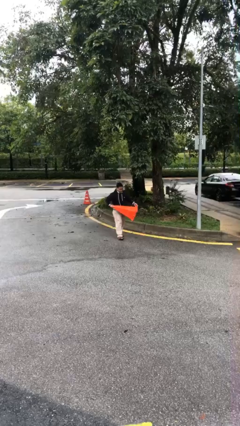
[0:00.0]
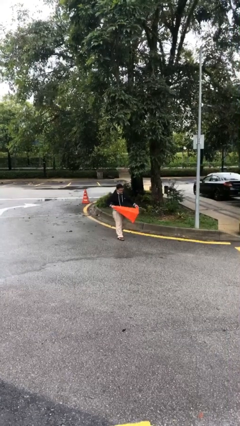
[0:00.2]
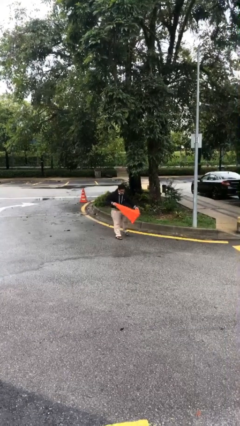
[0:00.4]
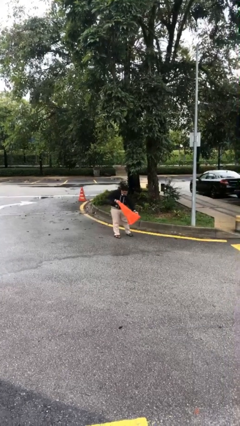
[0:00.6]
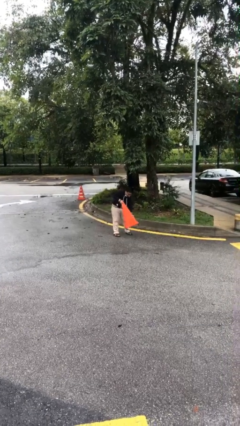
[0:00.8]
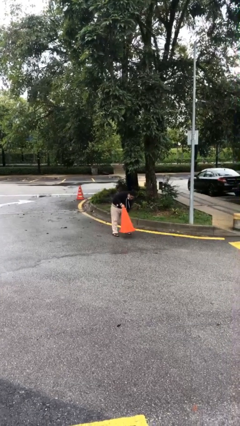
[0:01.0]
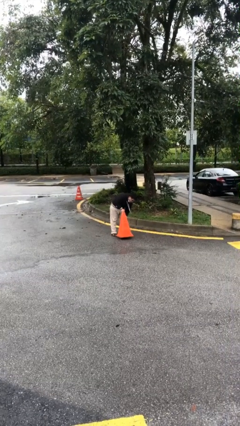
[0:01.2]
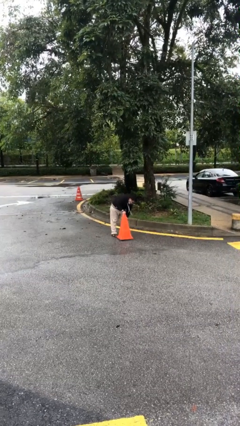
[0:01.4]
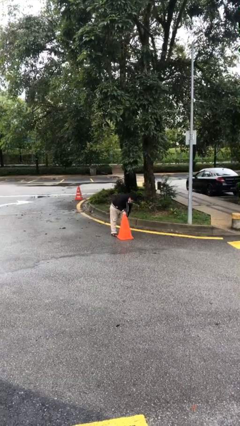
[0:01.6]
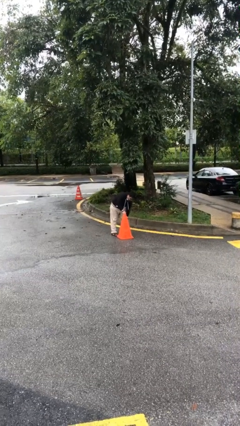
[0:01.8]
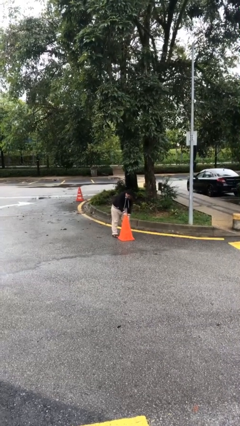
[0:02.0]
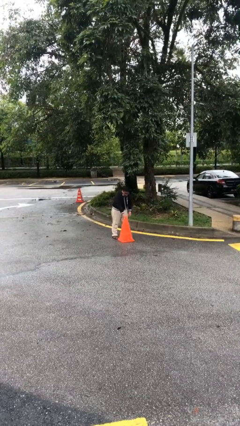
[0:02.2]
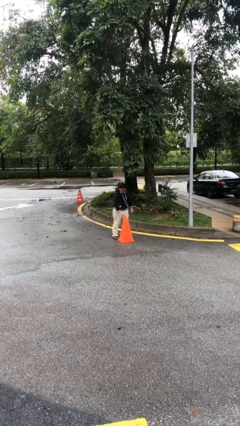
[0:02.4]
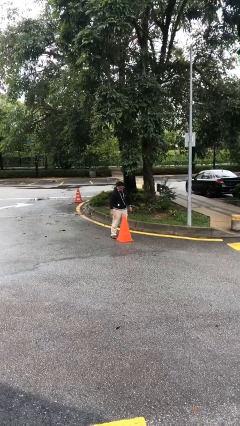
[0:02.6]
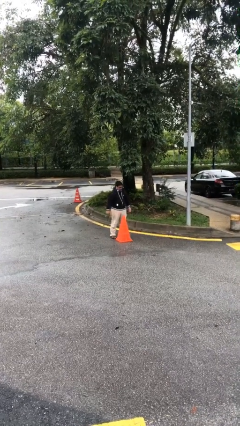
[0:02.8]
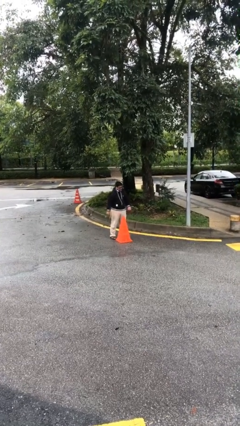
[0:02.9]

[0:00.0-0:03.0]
person puts down object on floor

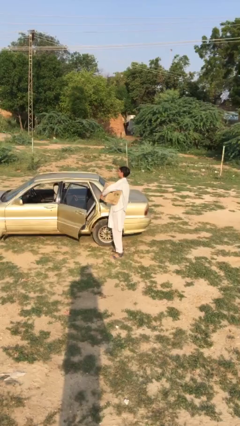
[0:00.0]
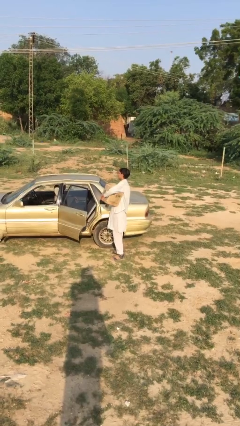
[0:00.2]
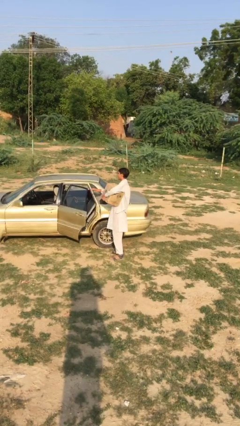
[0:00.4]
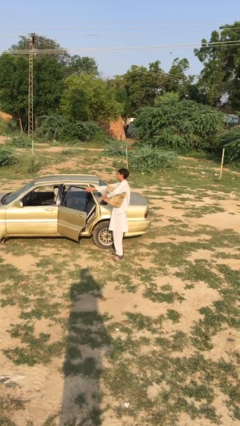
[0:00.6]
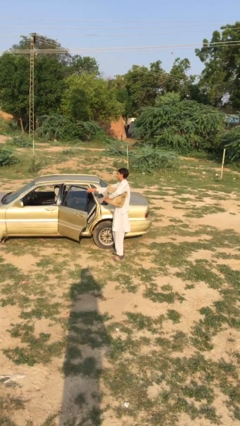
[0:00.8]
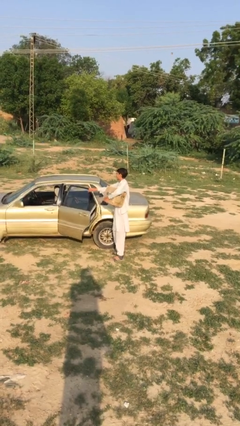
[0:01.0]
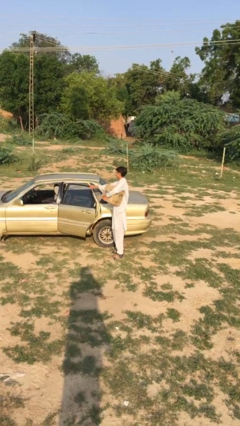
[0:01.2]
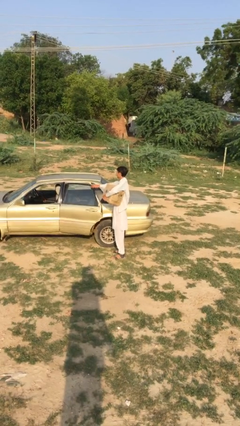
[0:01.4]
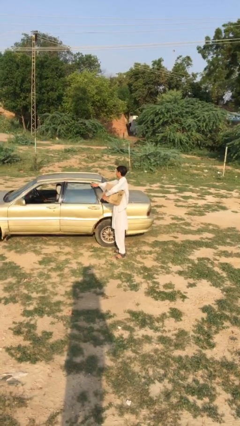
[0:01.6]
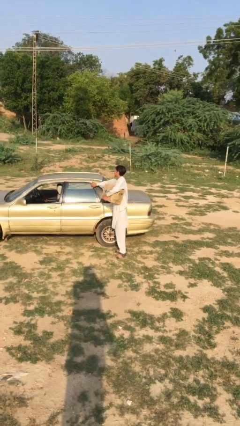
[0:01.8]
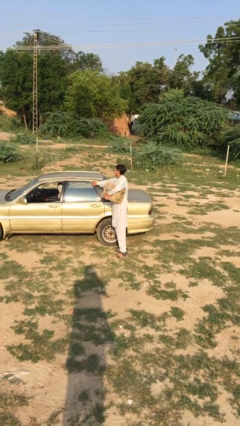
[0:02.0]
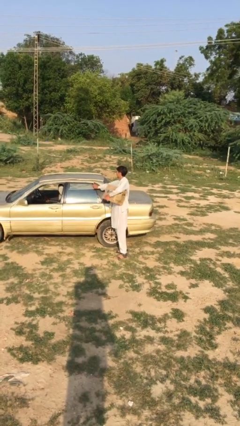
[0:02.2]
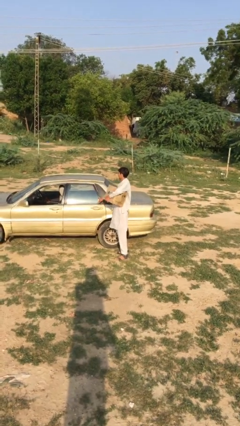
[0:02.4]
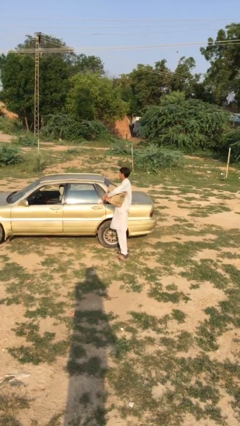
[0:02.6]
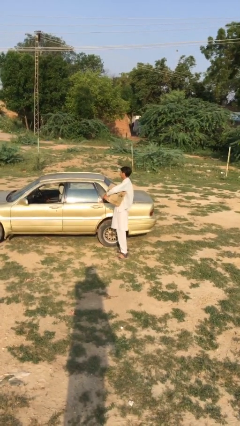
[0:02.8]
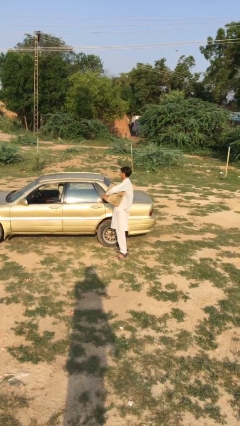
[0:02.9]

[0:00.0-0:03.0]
person closes car door

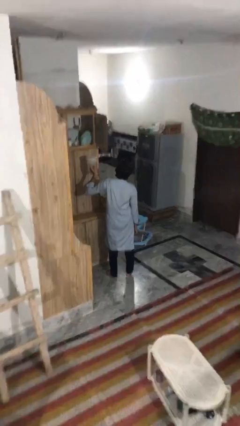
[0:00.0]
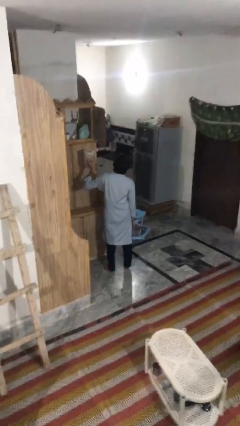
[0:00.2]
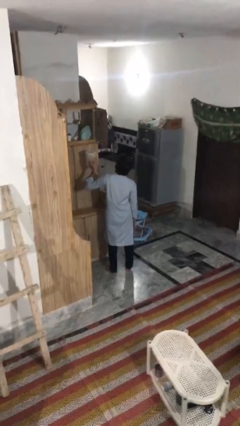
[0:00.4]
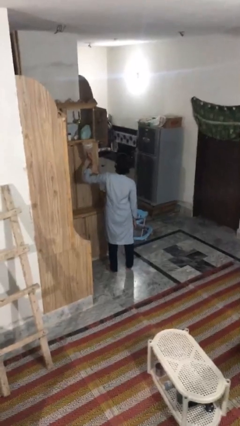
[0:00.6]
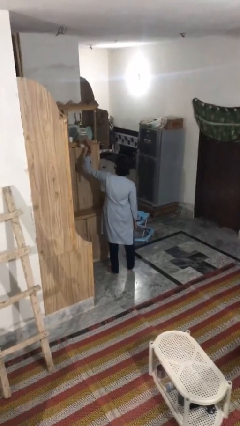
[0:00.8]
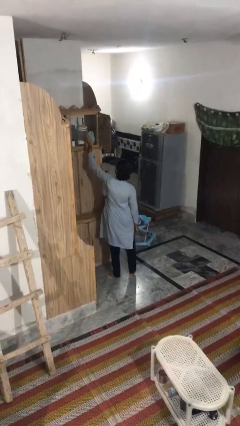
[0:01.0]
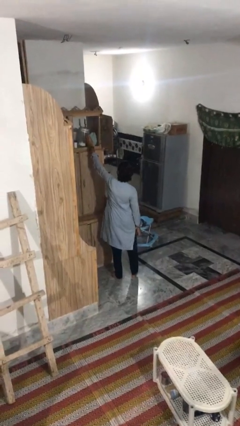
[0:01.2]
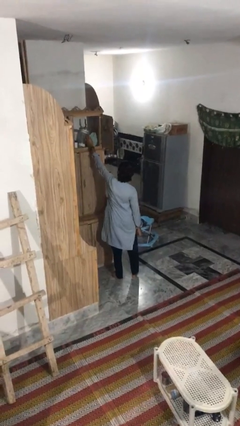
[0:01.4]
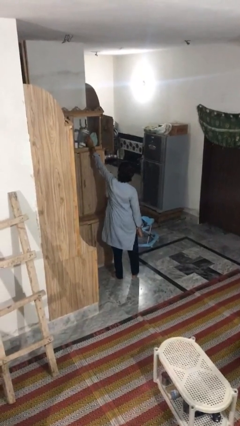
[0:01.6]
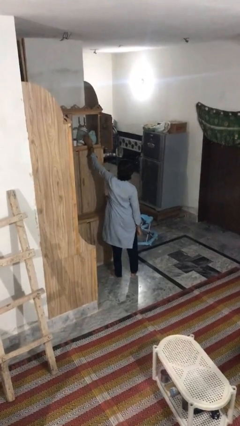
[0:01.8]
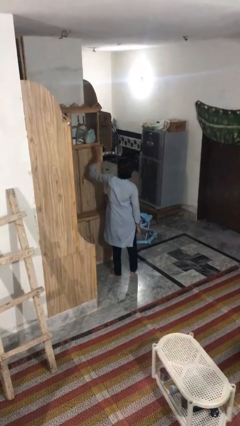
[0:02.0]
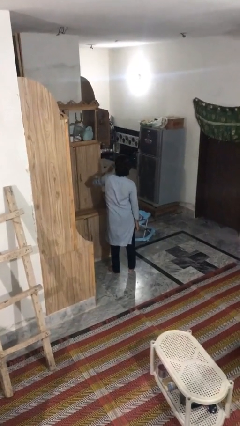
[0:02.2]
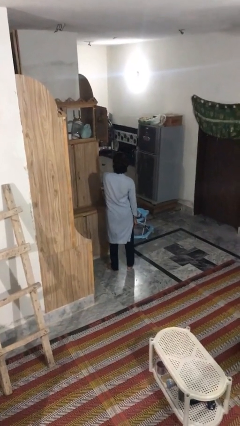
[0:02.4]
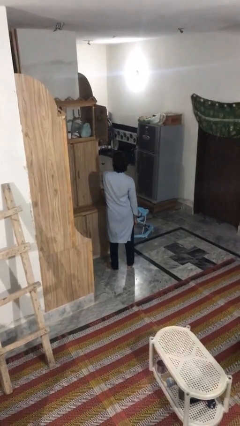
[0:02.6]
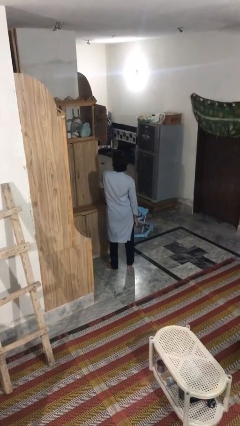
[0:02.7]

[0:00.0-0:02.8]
person puts down object on shelf

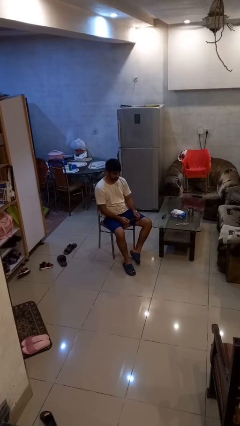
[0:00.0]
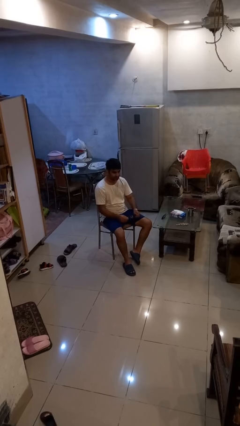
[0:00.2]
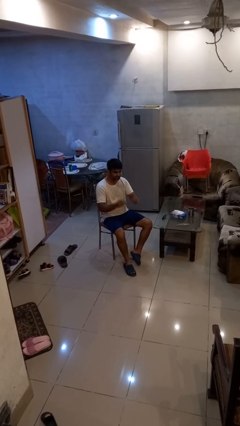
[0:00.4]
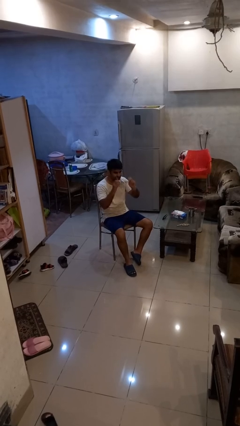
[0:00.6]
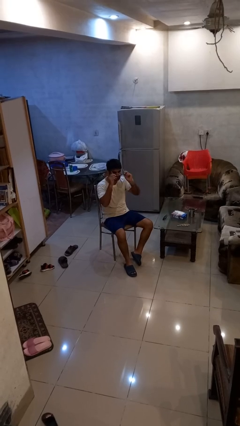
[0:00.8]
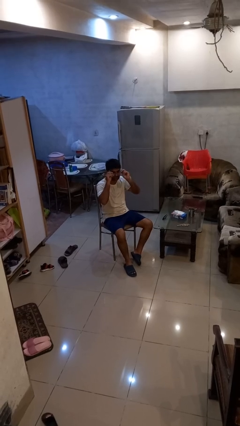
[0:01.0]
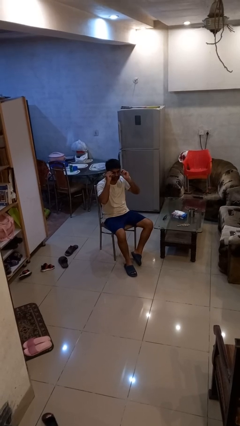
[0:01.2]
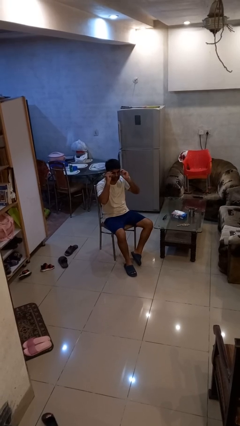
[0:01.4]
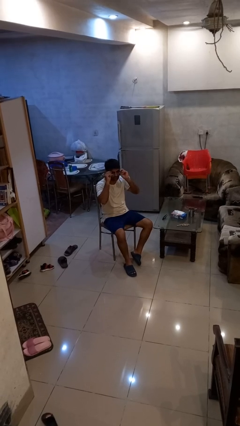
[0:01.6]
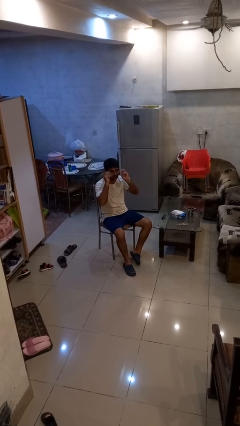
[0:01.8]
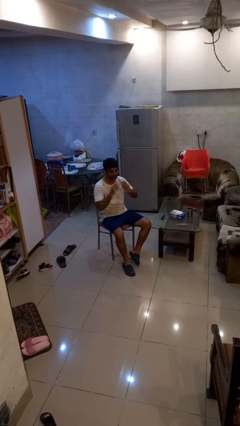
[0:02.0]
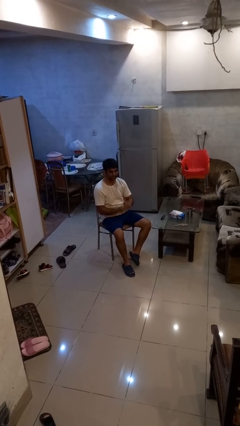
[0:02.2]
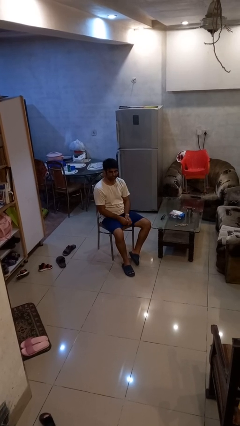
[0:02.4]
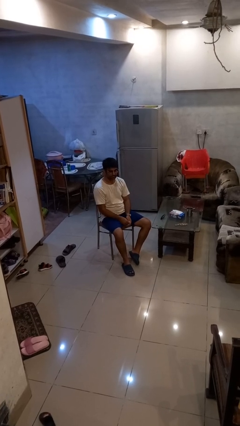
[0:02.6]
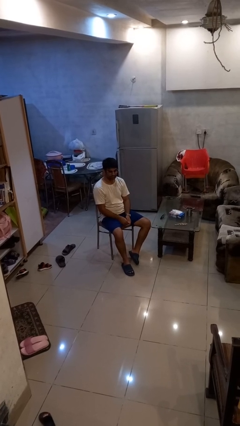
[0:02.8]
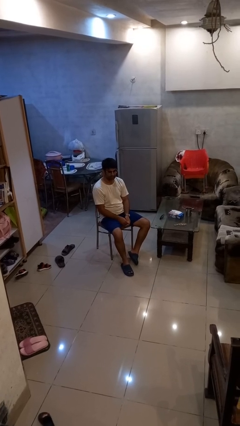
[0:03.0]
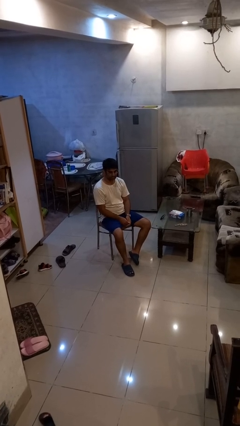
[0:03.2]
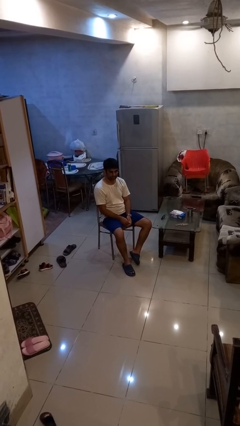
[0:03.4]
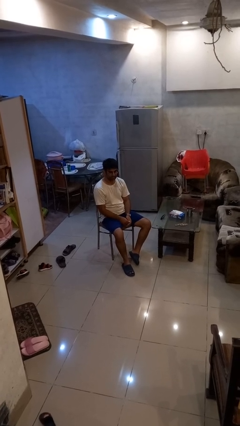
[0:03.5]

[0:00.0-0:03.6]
person puts on glasses

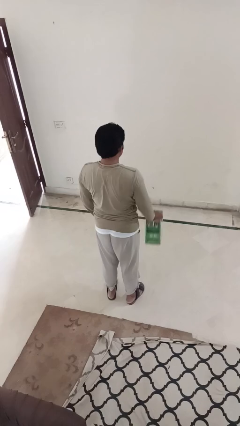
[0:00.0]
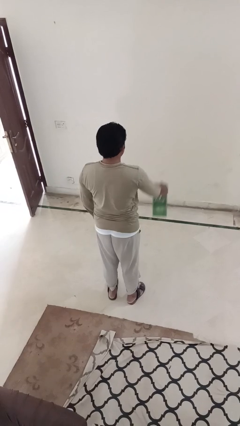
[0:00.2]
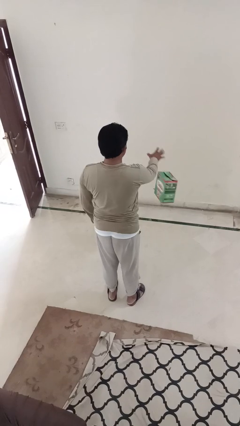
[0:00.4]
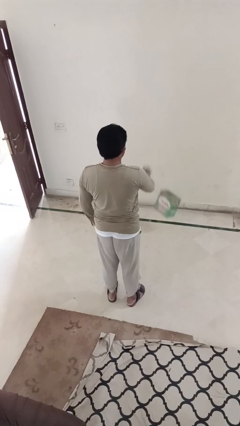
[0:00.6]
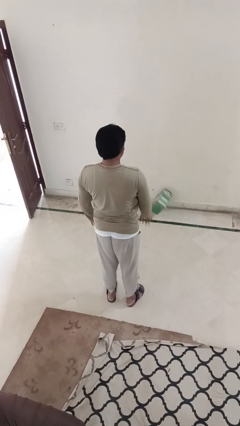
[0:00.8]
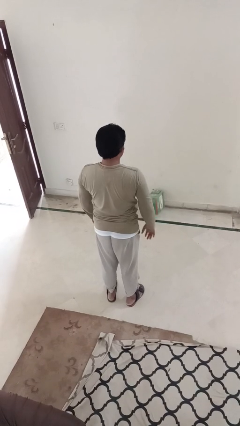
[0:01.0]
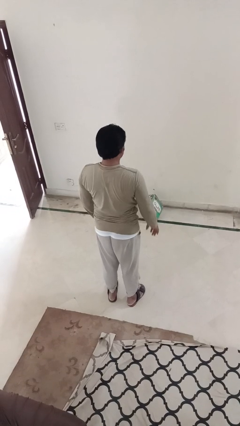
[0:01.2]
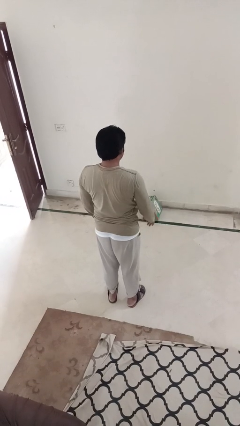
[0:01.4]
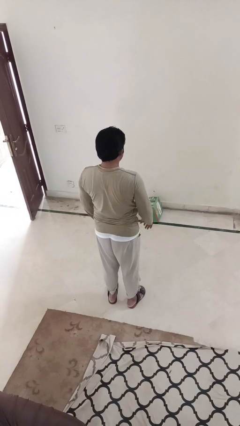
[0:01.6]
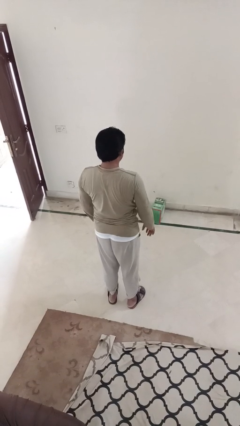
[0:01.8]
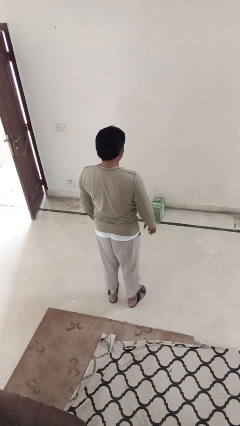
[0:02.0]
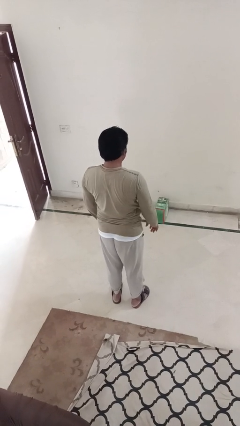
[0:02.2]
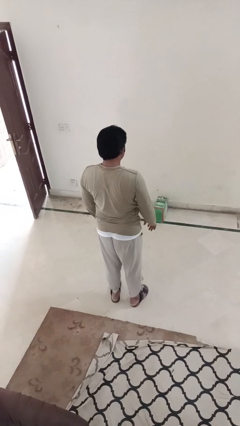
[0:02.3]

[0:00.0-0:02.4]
person throws object to ground

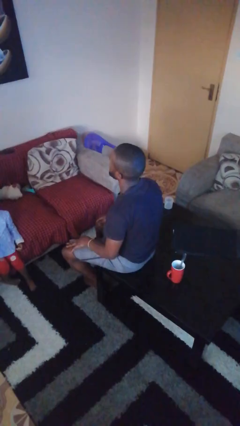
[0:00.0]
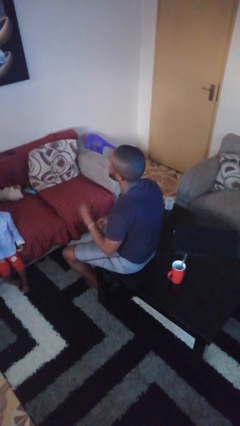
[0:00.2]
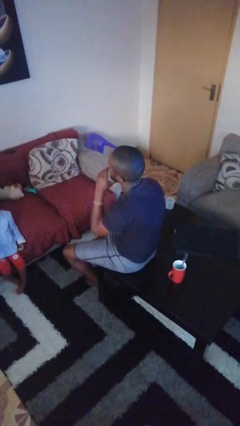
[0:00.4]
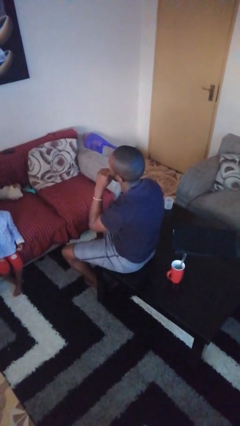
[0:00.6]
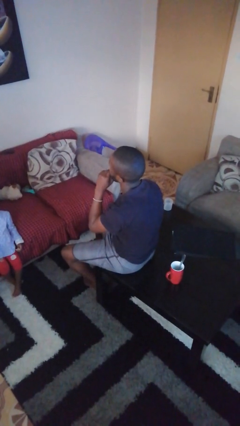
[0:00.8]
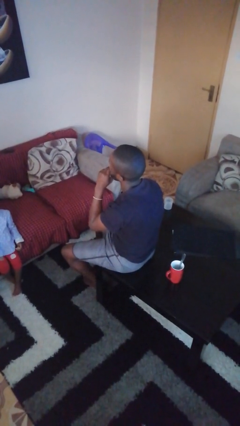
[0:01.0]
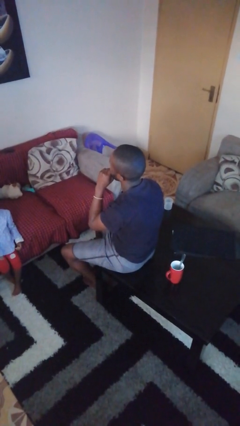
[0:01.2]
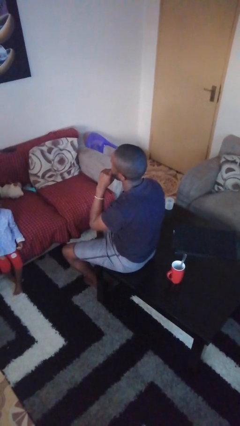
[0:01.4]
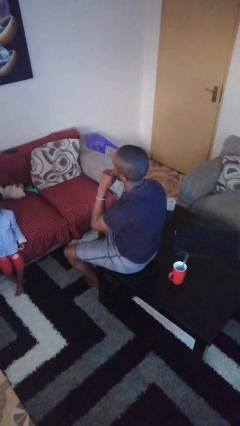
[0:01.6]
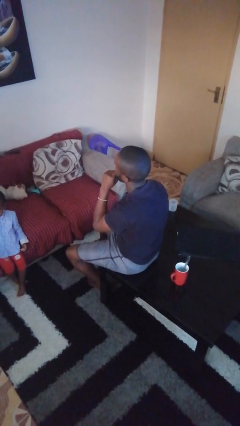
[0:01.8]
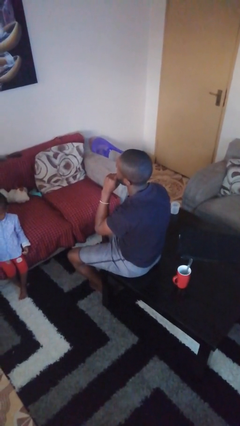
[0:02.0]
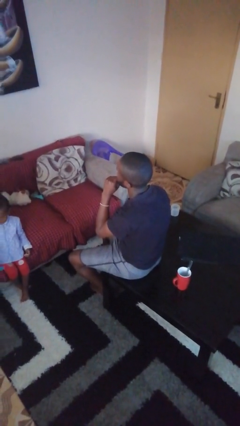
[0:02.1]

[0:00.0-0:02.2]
person strokes chin

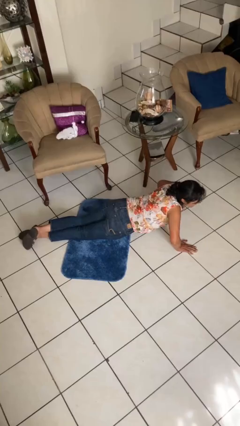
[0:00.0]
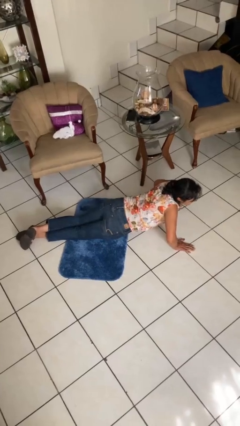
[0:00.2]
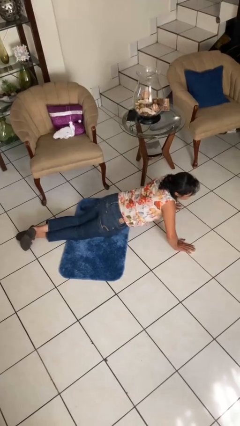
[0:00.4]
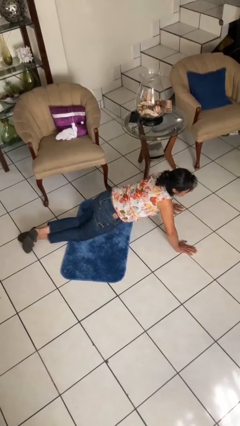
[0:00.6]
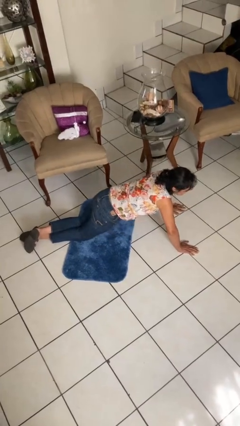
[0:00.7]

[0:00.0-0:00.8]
person exercises with pushup
